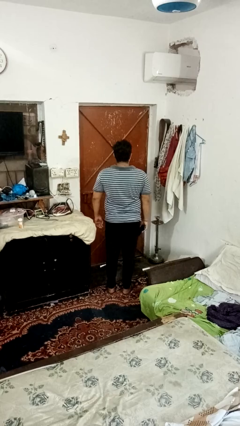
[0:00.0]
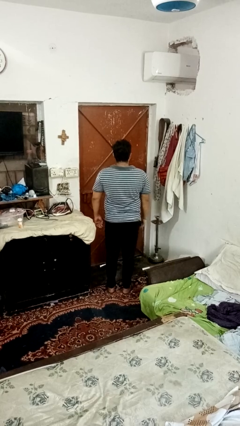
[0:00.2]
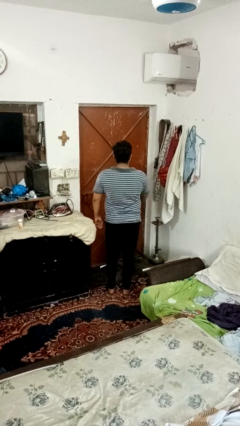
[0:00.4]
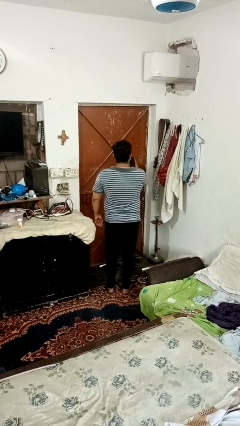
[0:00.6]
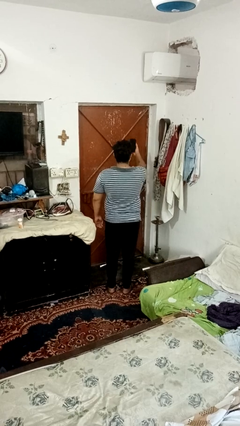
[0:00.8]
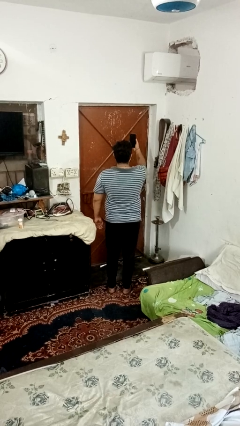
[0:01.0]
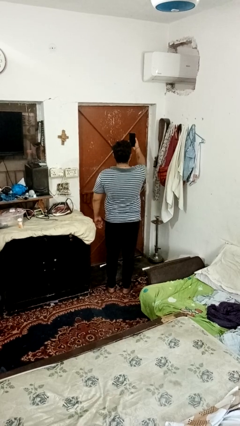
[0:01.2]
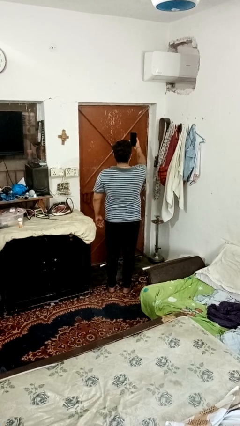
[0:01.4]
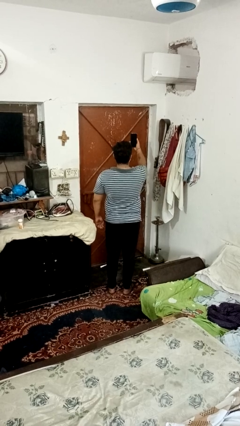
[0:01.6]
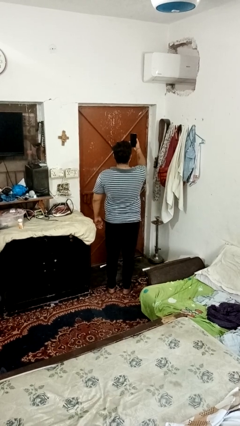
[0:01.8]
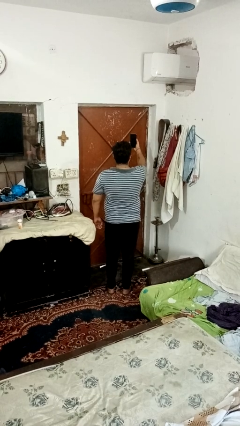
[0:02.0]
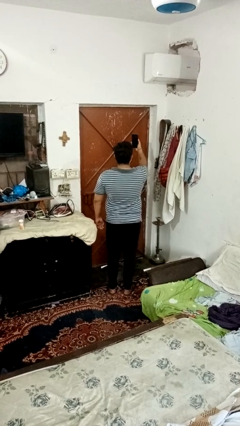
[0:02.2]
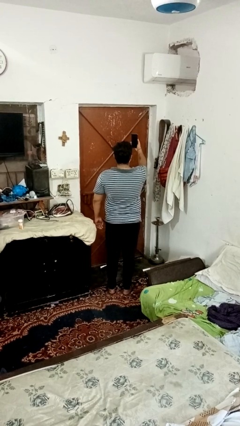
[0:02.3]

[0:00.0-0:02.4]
person takes selfie

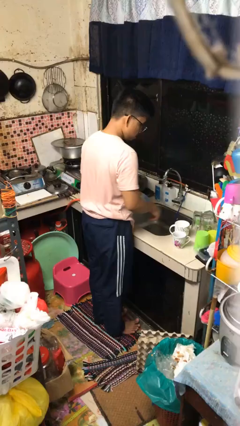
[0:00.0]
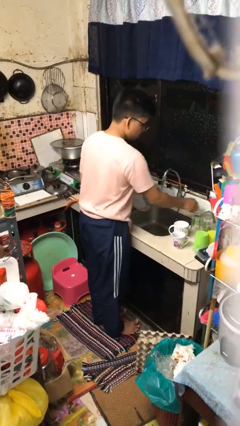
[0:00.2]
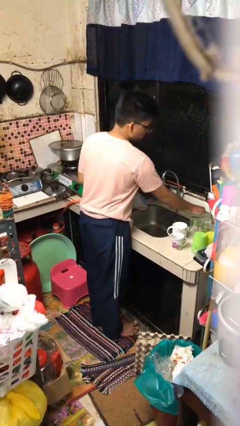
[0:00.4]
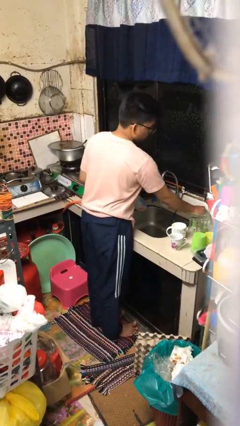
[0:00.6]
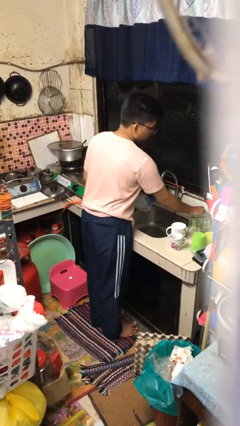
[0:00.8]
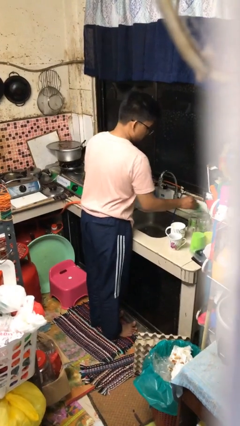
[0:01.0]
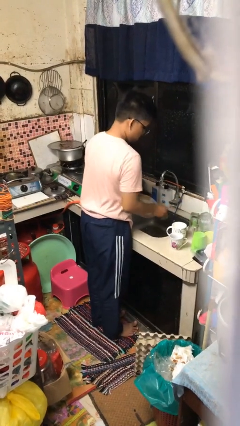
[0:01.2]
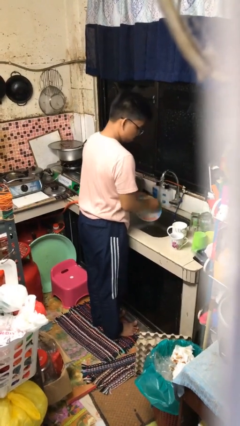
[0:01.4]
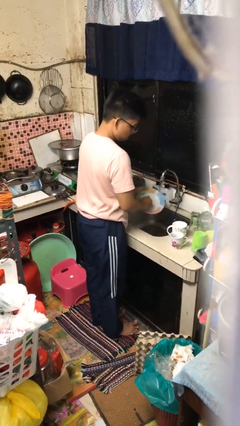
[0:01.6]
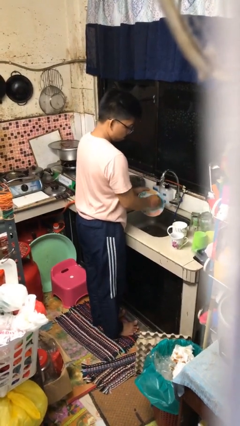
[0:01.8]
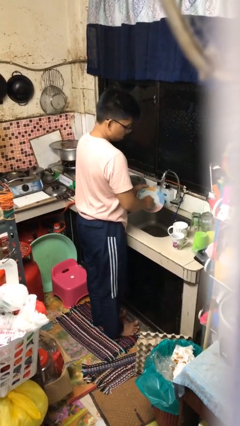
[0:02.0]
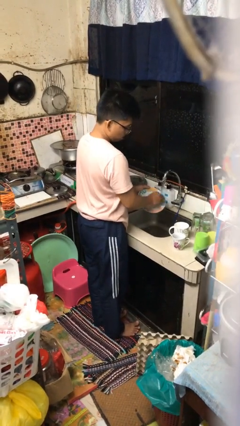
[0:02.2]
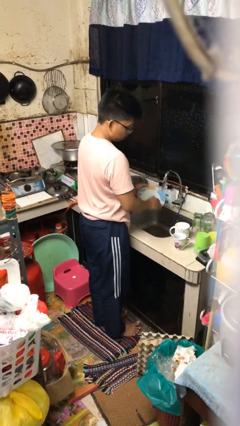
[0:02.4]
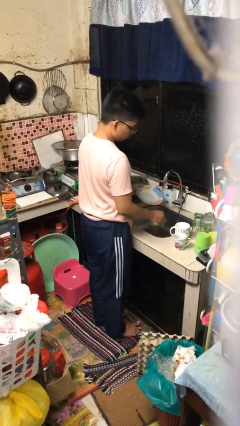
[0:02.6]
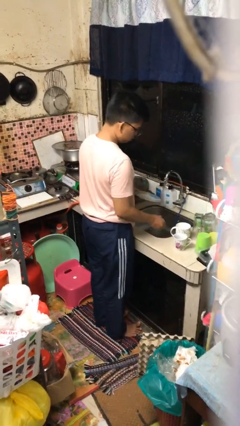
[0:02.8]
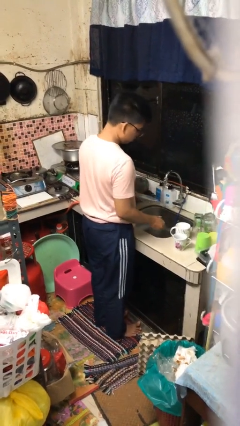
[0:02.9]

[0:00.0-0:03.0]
person washes dish

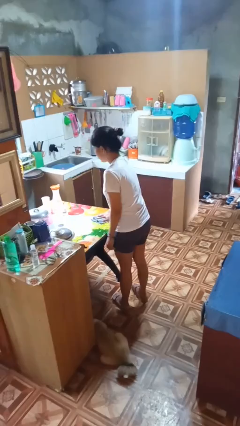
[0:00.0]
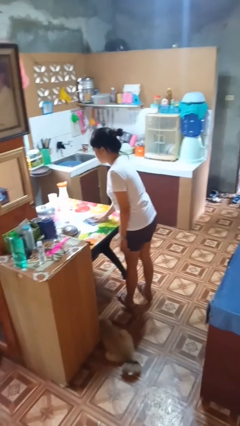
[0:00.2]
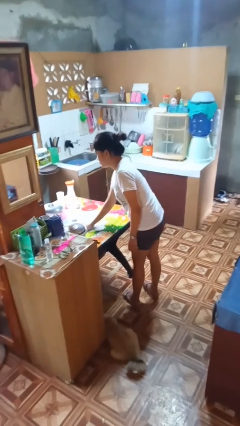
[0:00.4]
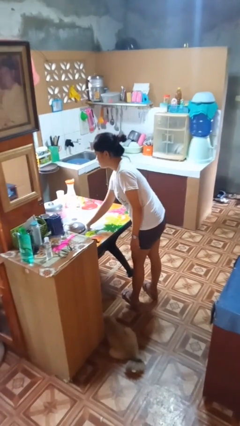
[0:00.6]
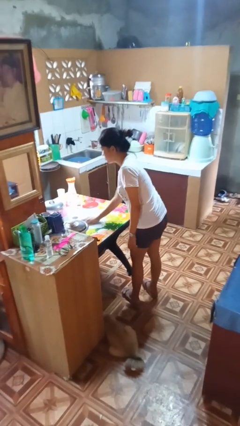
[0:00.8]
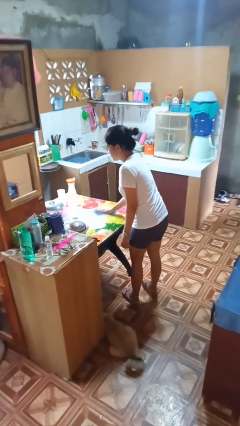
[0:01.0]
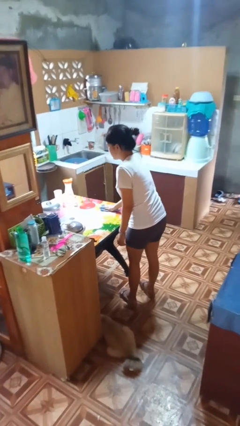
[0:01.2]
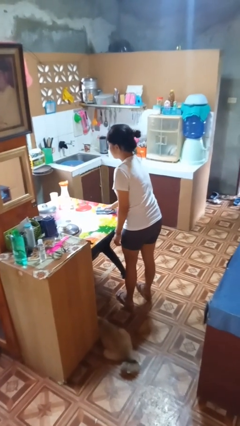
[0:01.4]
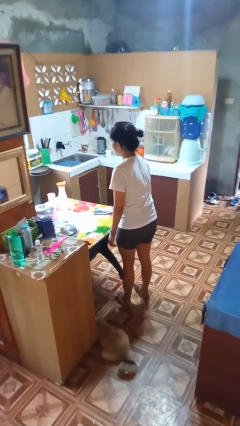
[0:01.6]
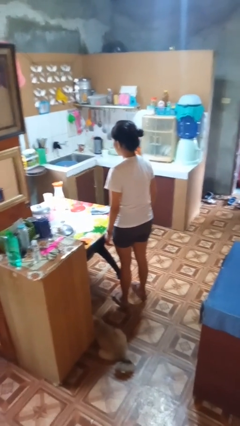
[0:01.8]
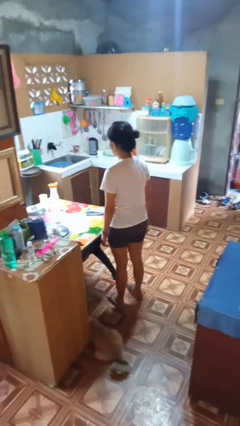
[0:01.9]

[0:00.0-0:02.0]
person cleans table with rag

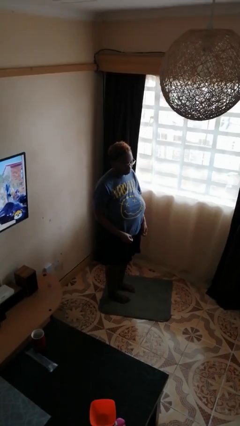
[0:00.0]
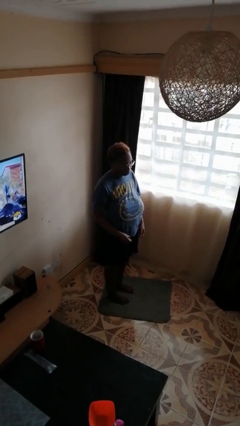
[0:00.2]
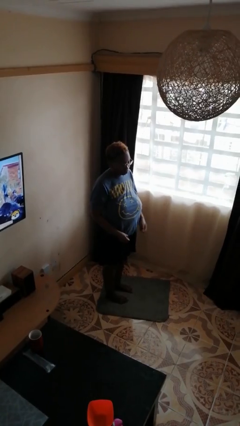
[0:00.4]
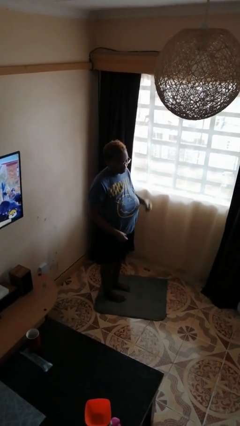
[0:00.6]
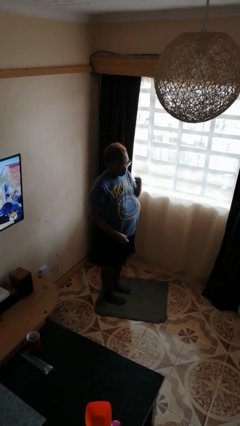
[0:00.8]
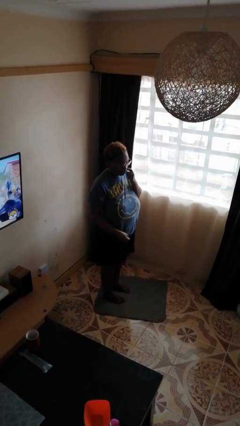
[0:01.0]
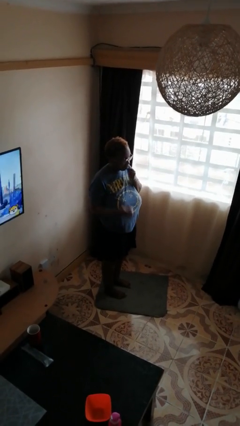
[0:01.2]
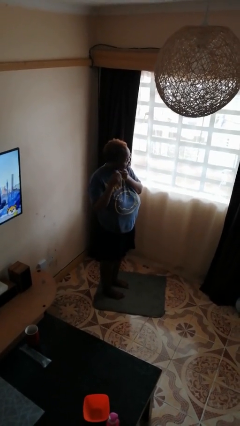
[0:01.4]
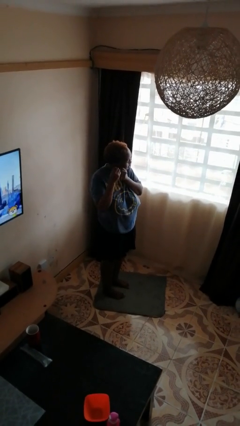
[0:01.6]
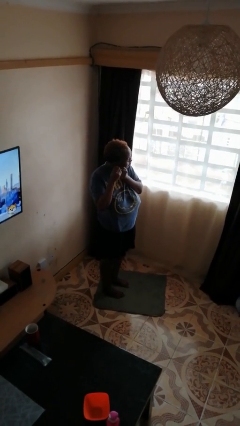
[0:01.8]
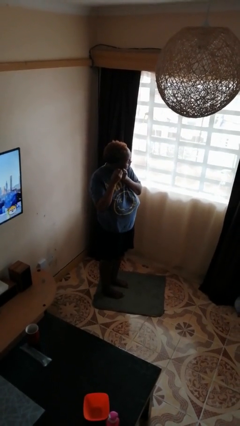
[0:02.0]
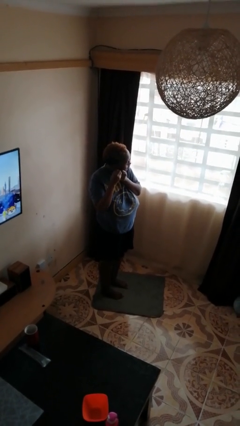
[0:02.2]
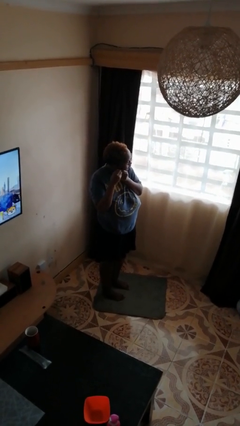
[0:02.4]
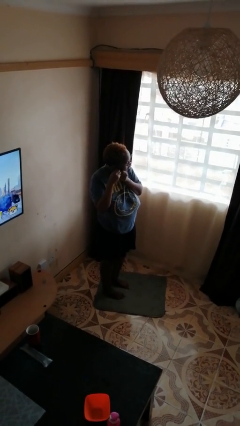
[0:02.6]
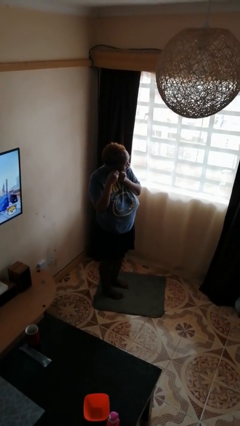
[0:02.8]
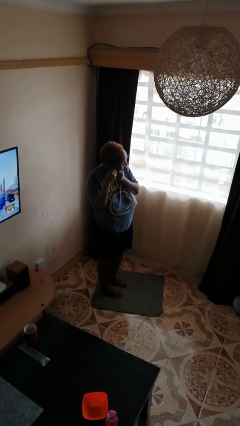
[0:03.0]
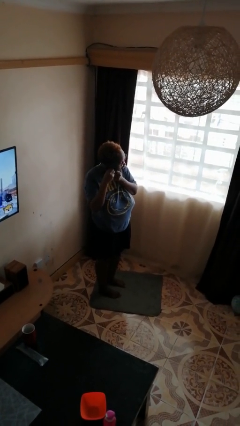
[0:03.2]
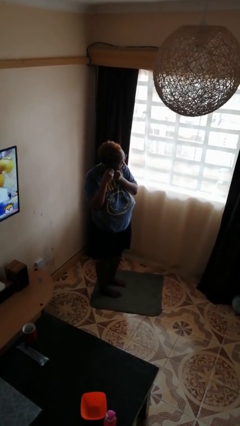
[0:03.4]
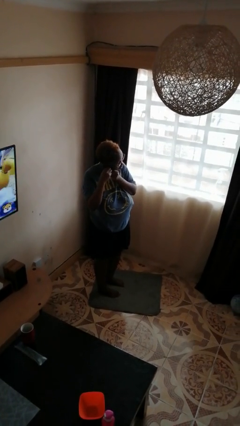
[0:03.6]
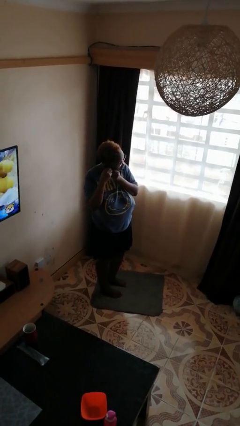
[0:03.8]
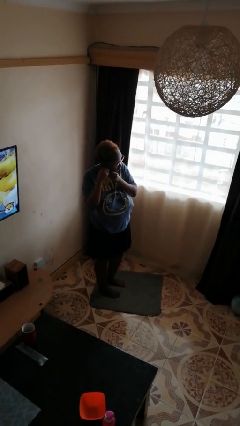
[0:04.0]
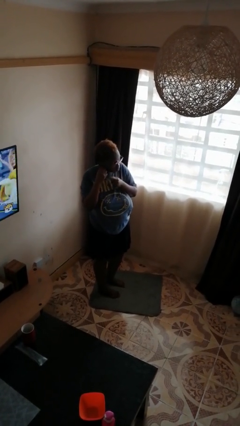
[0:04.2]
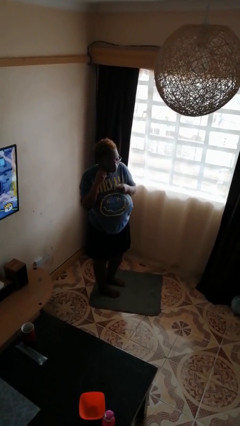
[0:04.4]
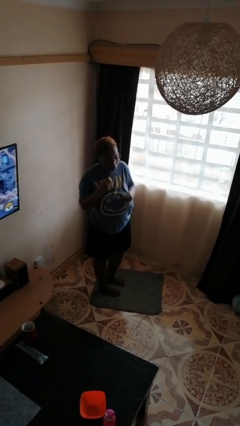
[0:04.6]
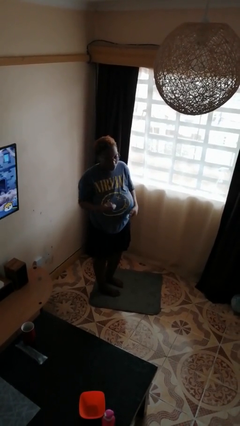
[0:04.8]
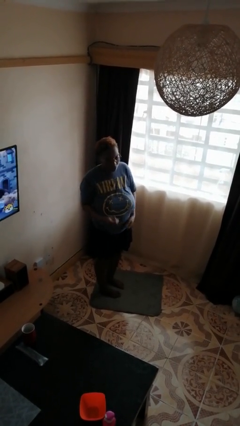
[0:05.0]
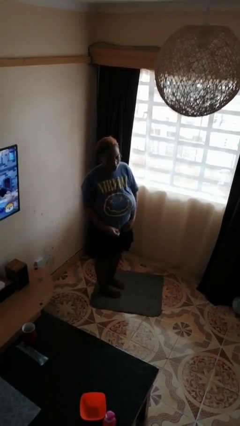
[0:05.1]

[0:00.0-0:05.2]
person puts on earrings

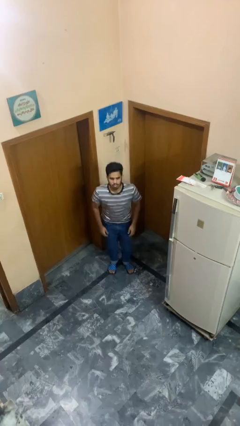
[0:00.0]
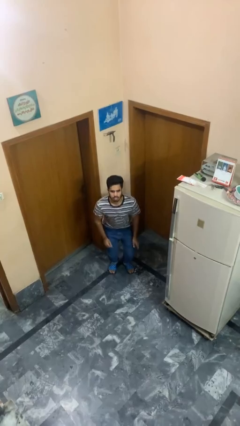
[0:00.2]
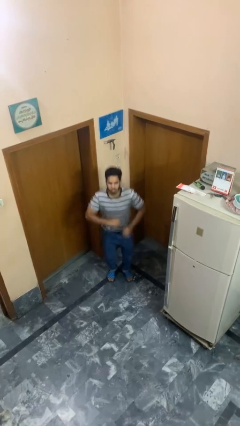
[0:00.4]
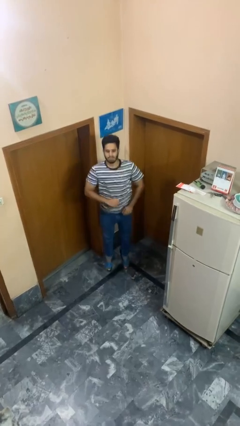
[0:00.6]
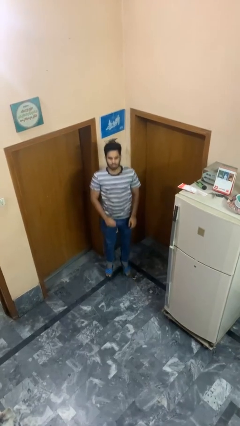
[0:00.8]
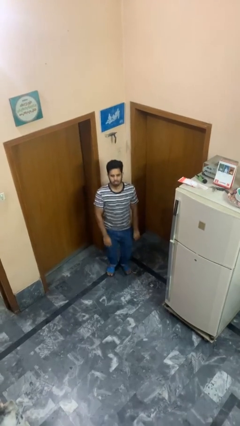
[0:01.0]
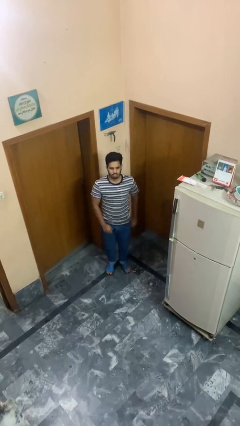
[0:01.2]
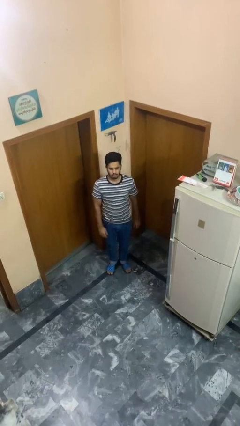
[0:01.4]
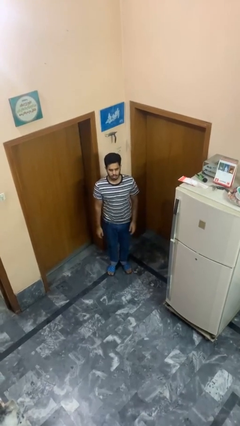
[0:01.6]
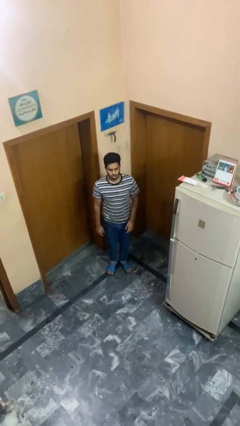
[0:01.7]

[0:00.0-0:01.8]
person jumps

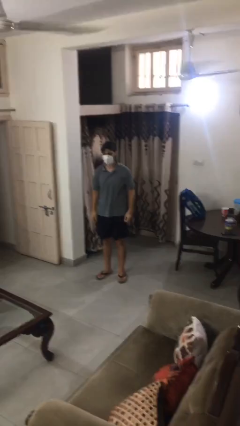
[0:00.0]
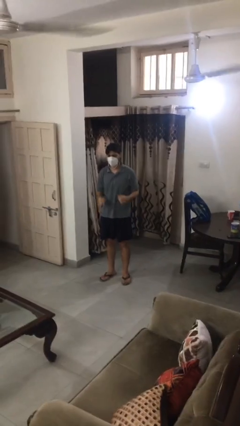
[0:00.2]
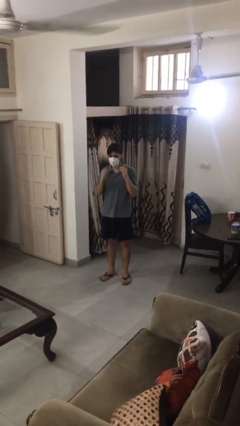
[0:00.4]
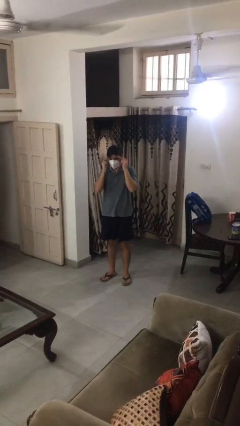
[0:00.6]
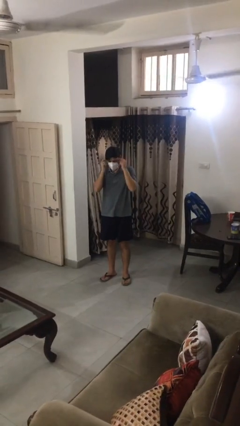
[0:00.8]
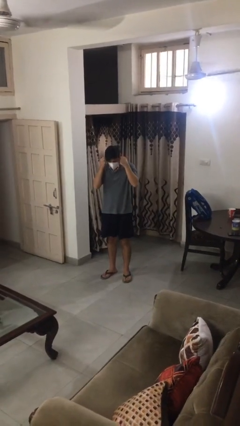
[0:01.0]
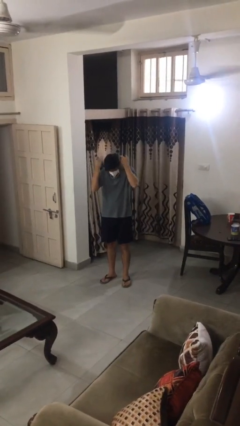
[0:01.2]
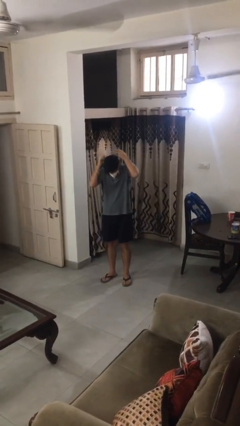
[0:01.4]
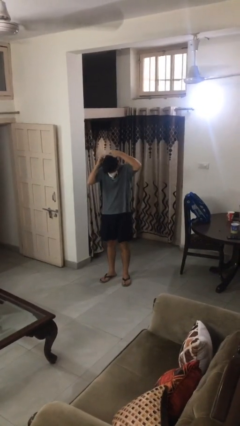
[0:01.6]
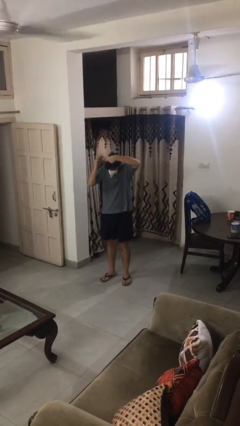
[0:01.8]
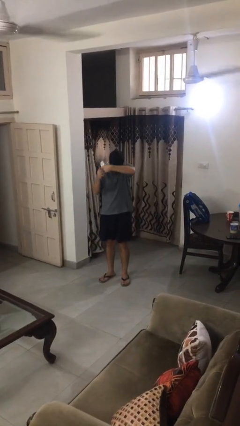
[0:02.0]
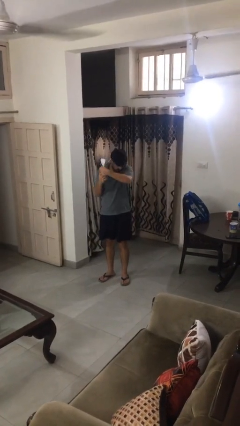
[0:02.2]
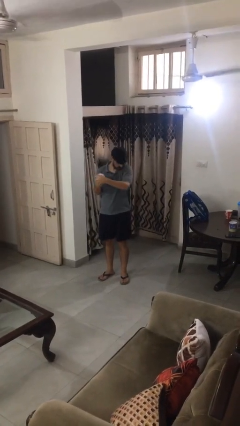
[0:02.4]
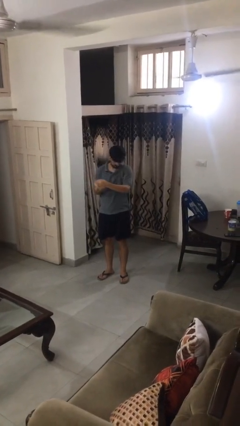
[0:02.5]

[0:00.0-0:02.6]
person takes off facemask

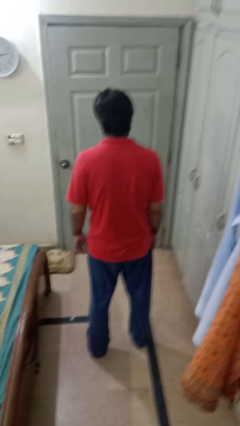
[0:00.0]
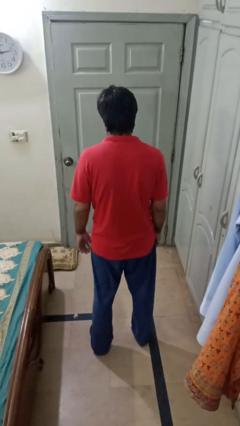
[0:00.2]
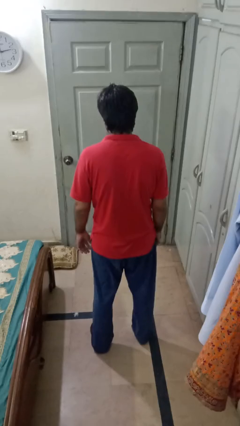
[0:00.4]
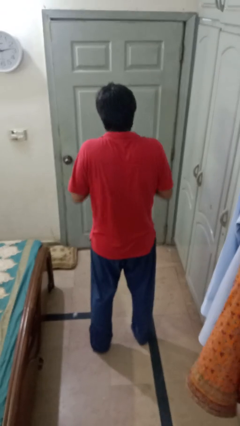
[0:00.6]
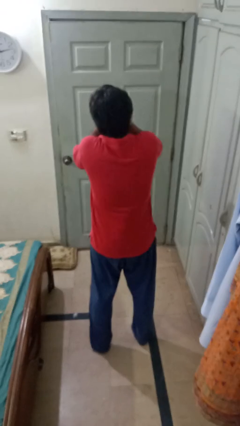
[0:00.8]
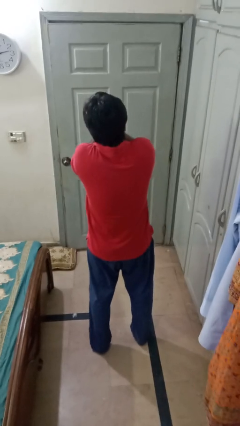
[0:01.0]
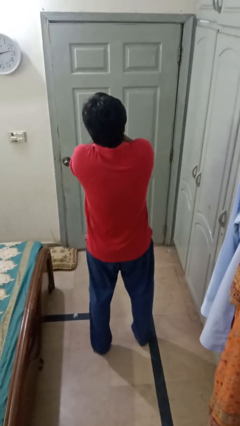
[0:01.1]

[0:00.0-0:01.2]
person covers face with hands
